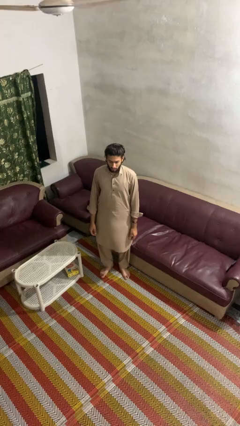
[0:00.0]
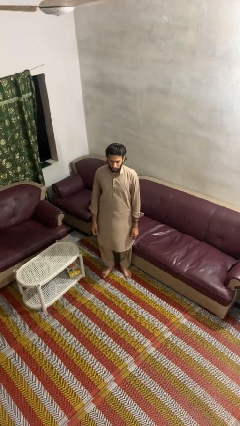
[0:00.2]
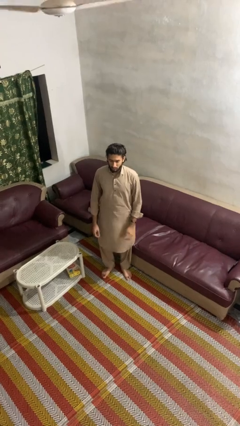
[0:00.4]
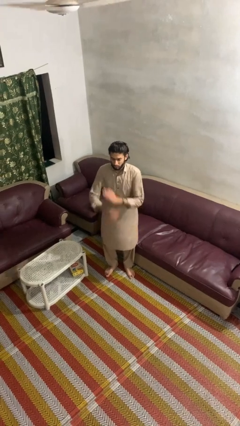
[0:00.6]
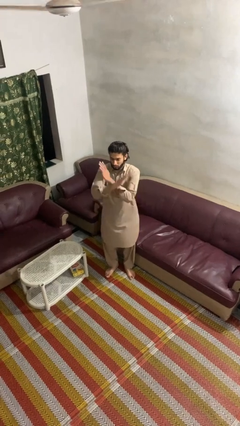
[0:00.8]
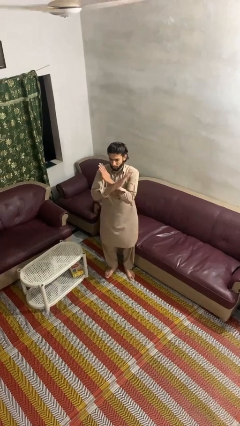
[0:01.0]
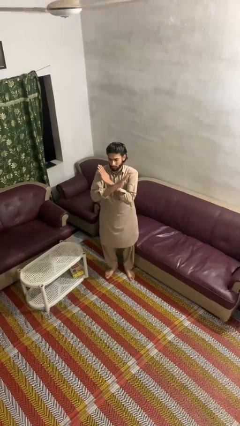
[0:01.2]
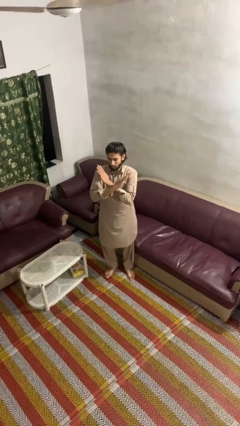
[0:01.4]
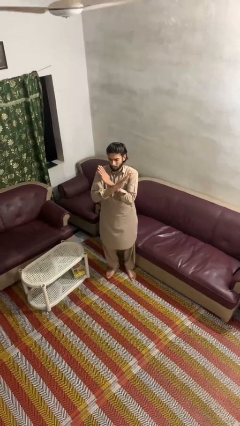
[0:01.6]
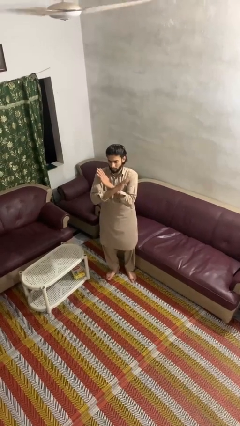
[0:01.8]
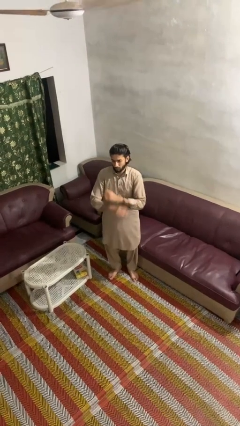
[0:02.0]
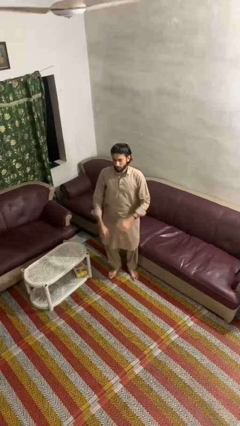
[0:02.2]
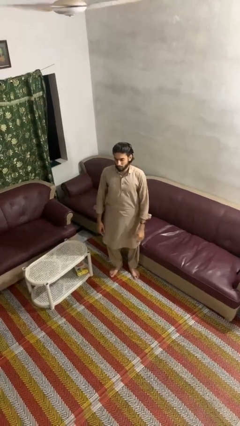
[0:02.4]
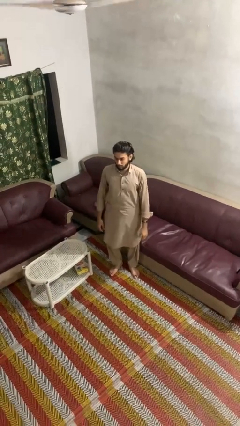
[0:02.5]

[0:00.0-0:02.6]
person gestures arms x

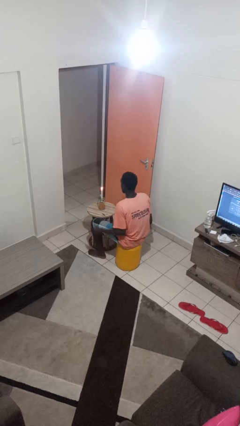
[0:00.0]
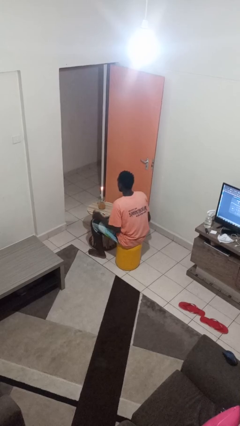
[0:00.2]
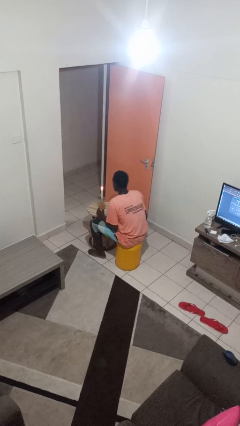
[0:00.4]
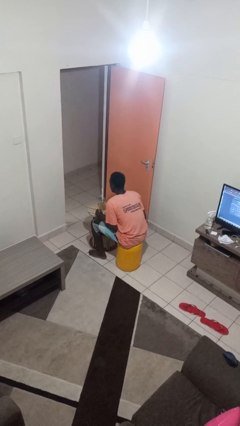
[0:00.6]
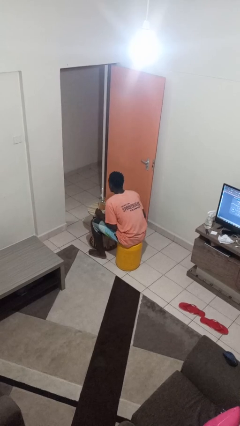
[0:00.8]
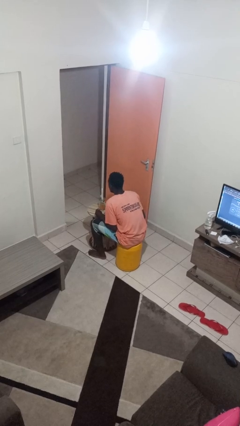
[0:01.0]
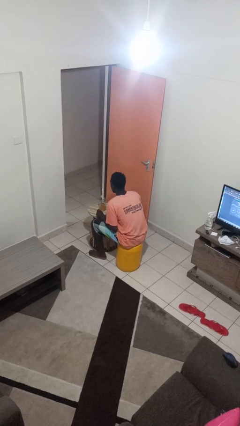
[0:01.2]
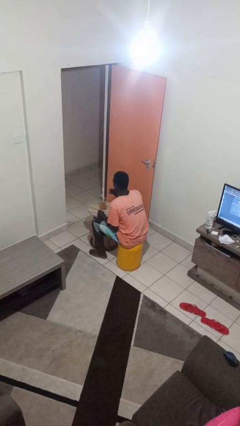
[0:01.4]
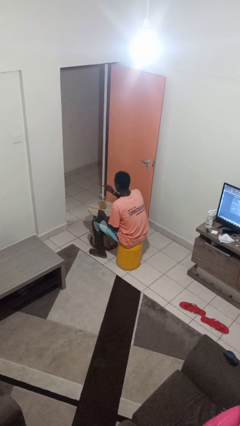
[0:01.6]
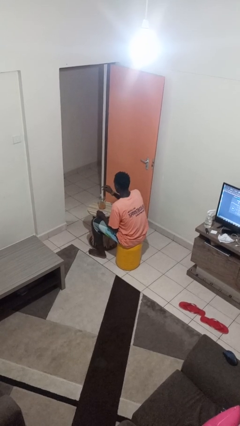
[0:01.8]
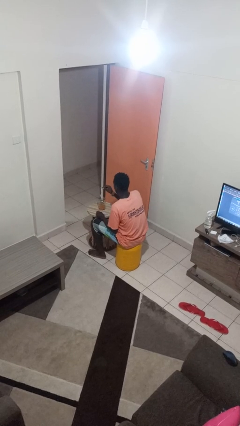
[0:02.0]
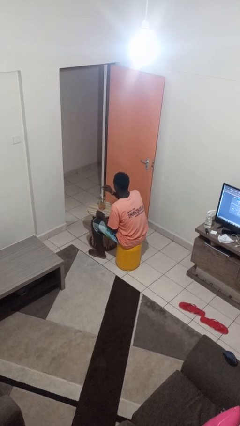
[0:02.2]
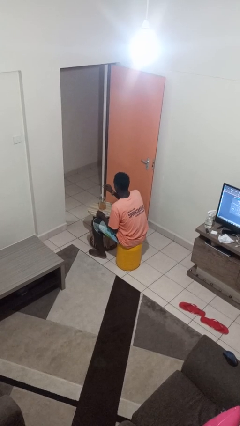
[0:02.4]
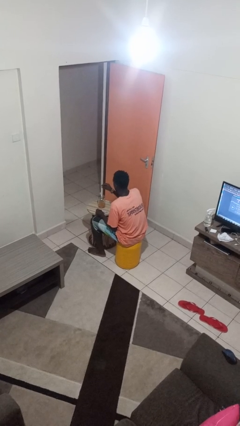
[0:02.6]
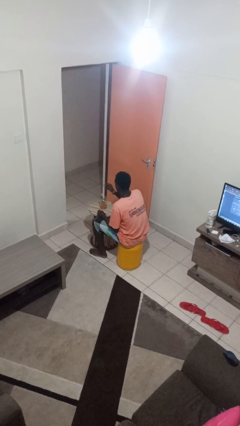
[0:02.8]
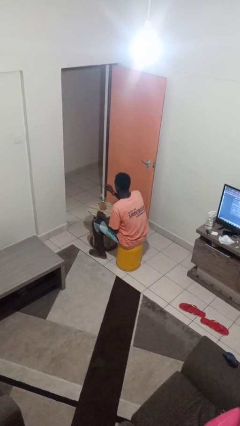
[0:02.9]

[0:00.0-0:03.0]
person extinguishes candle

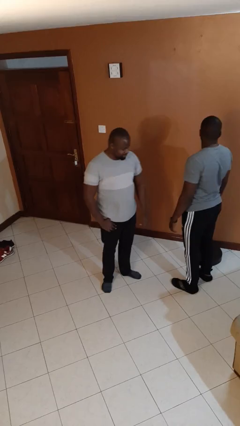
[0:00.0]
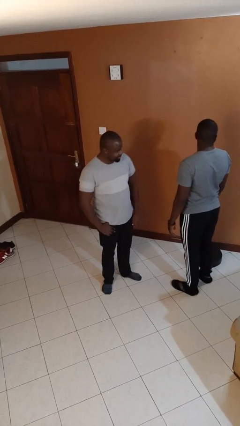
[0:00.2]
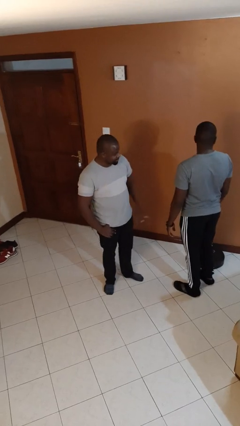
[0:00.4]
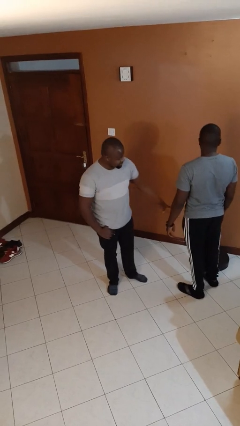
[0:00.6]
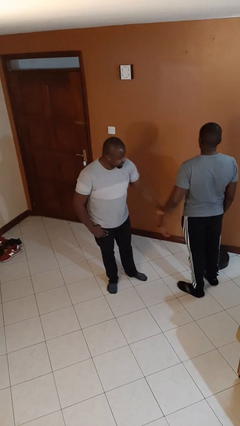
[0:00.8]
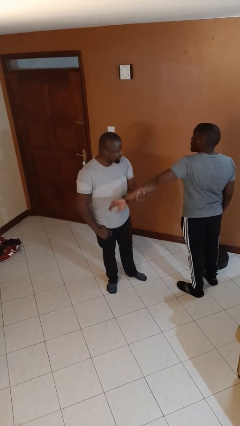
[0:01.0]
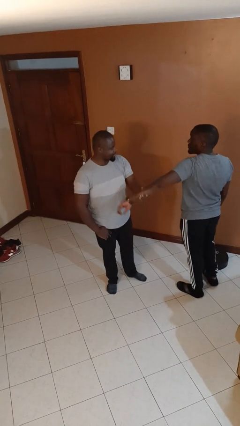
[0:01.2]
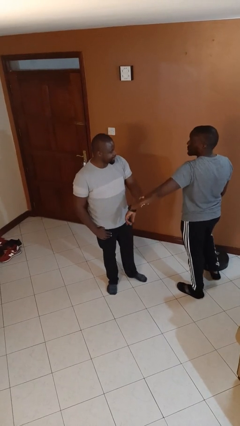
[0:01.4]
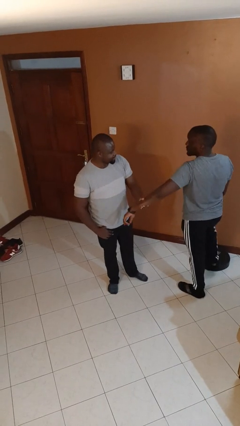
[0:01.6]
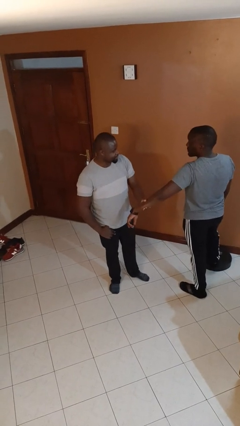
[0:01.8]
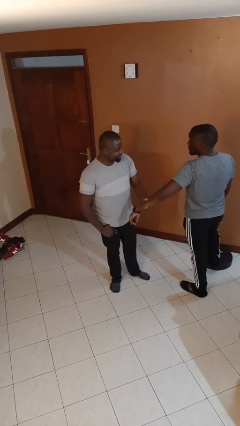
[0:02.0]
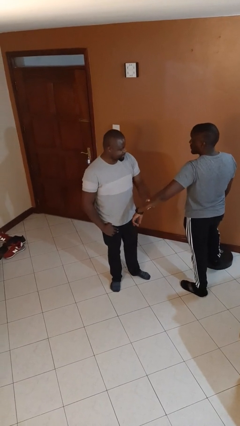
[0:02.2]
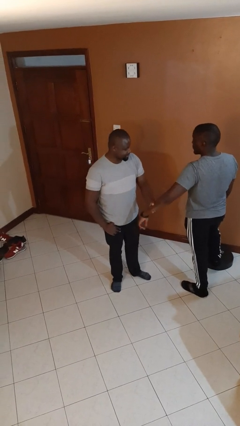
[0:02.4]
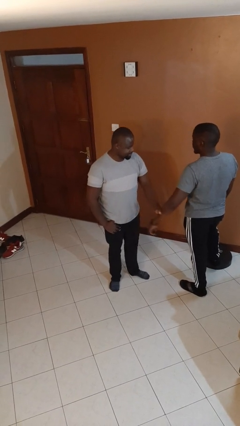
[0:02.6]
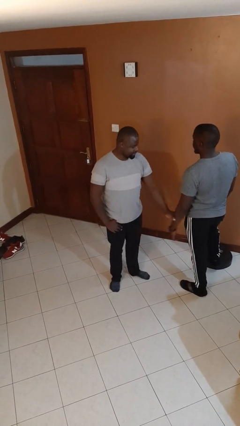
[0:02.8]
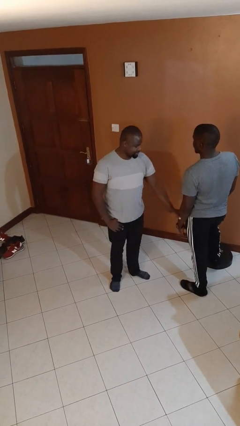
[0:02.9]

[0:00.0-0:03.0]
person grabs person by forearm

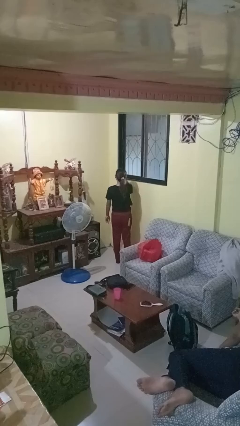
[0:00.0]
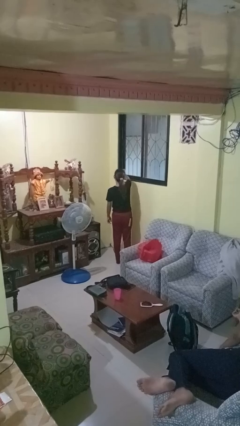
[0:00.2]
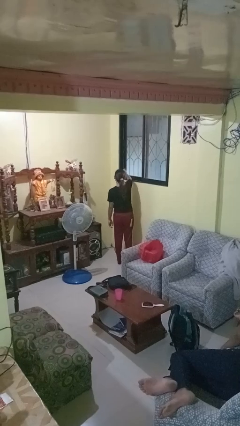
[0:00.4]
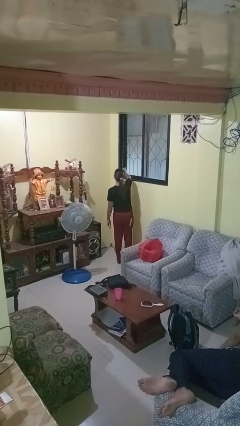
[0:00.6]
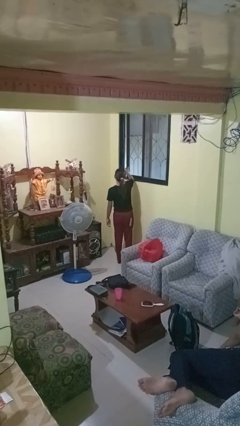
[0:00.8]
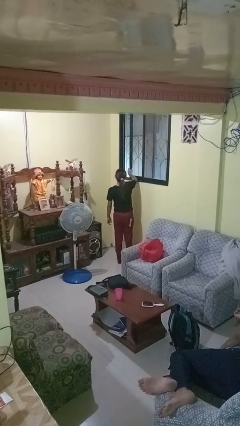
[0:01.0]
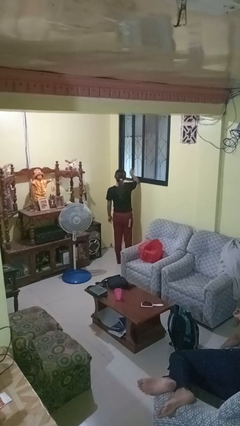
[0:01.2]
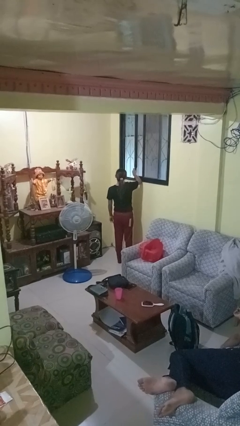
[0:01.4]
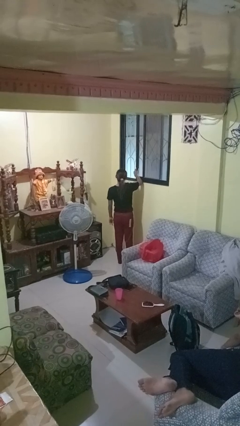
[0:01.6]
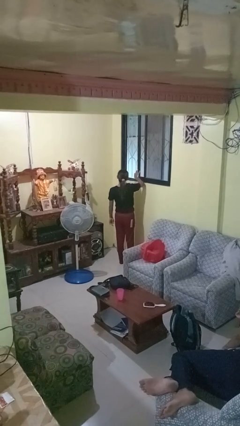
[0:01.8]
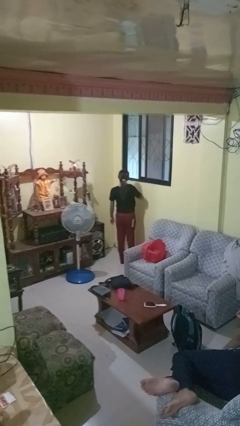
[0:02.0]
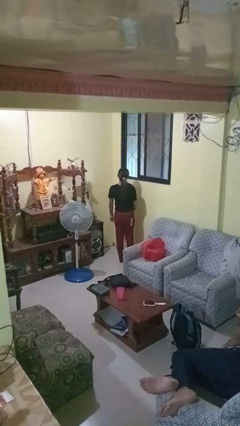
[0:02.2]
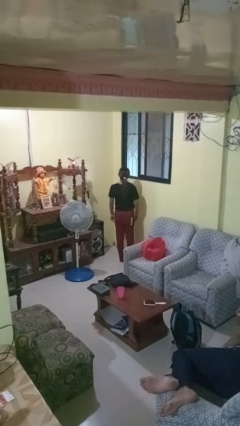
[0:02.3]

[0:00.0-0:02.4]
person opens home window

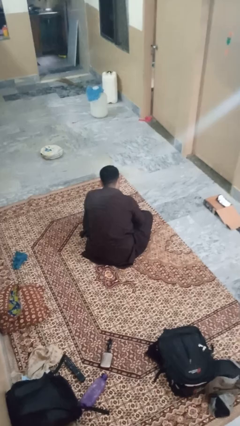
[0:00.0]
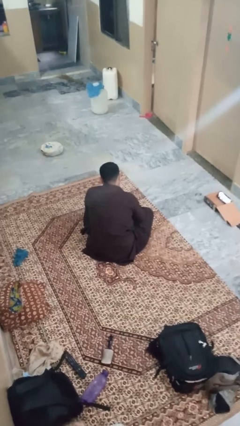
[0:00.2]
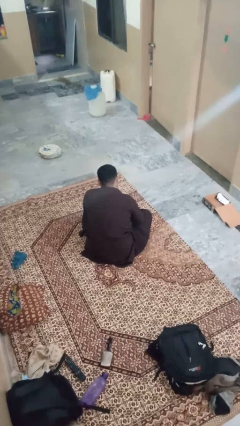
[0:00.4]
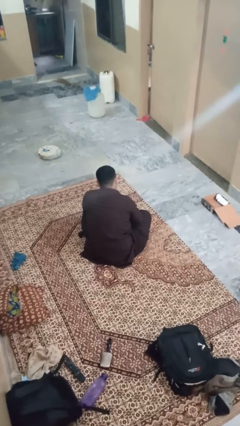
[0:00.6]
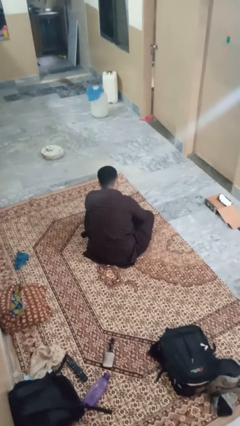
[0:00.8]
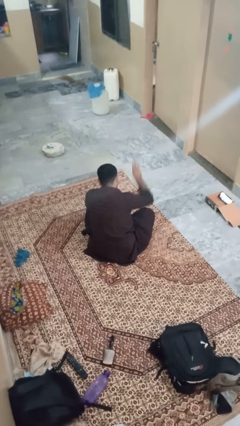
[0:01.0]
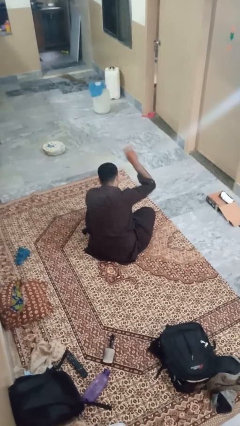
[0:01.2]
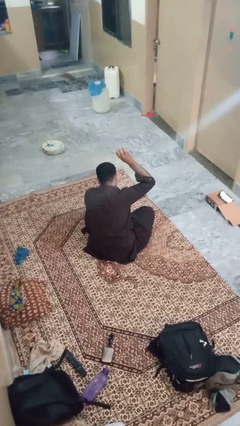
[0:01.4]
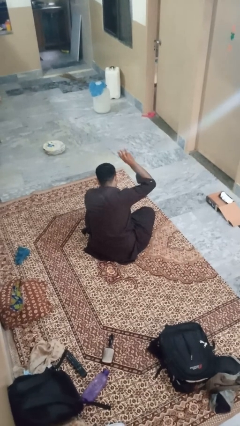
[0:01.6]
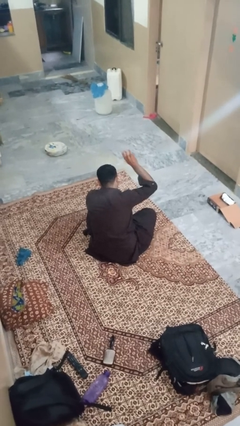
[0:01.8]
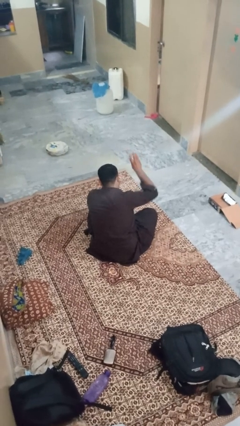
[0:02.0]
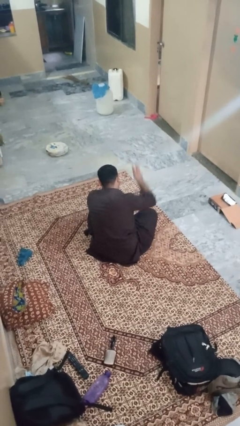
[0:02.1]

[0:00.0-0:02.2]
person gestures number three

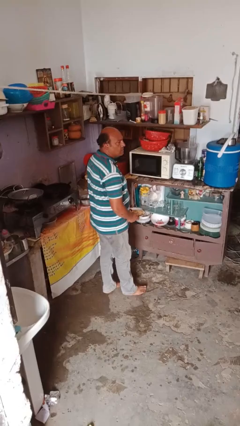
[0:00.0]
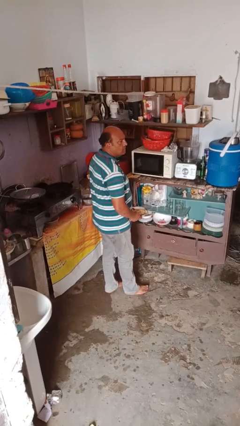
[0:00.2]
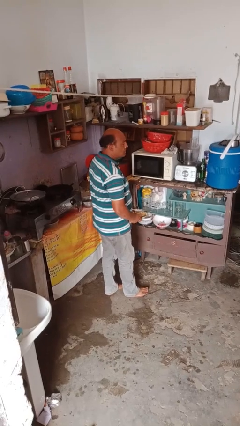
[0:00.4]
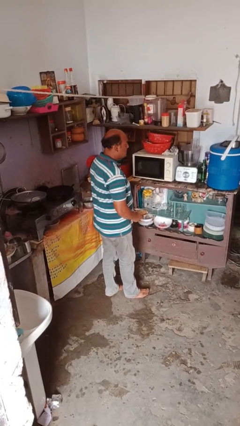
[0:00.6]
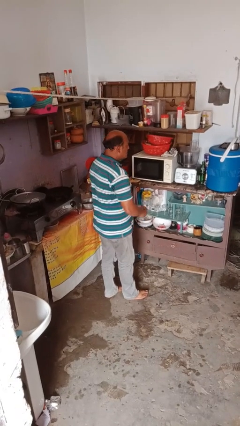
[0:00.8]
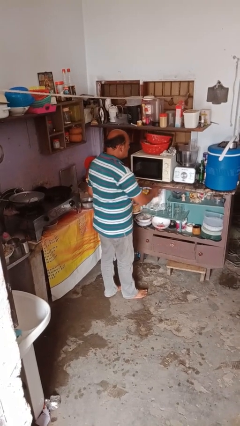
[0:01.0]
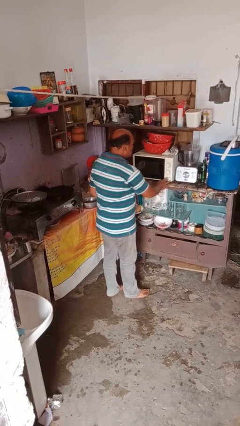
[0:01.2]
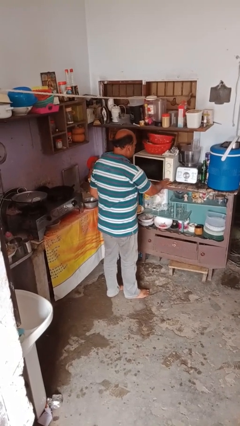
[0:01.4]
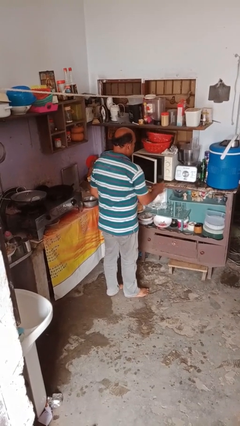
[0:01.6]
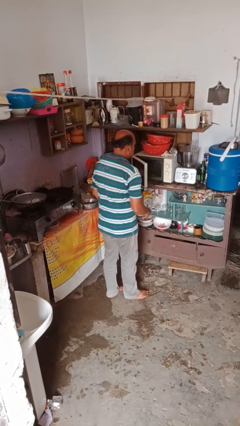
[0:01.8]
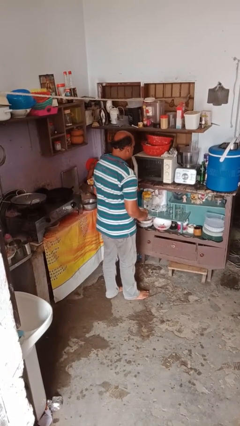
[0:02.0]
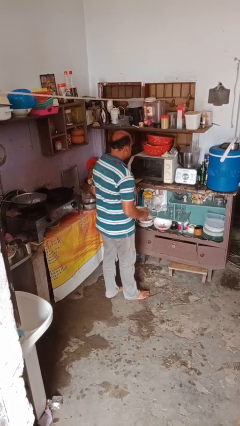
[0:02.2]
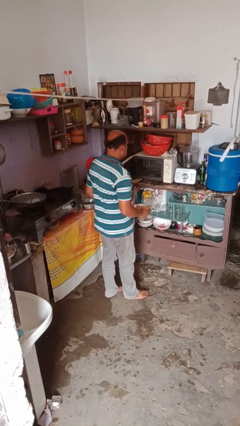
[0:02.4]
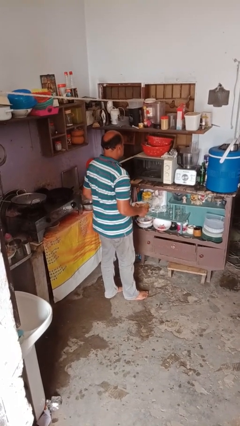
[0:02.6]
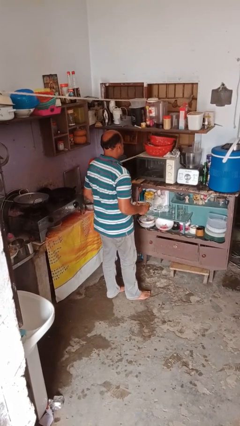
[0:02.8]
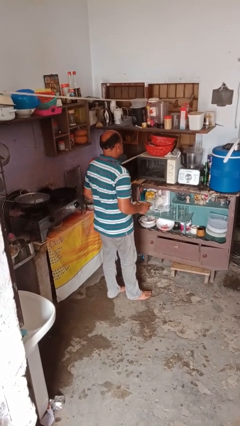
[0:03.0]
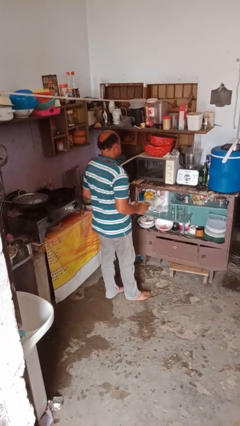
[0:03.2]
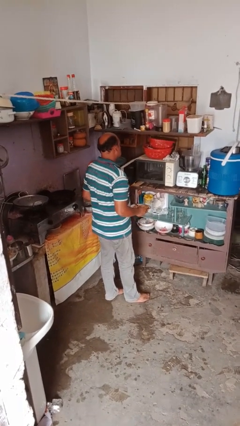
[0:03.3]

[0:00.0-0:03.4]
person opens microwave

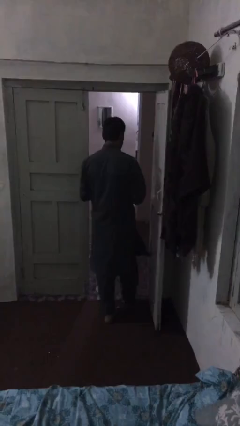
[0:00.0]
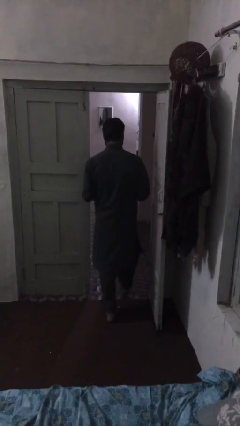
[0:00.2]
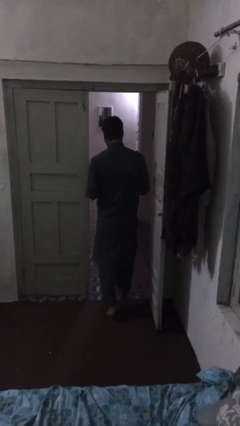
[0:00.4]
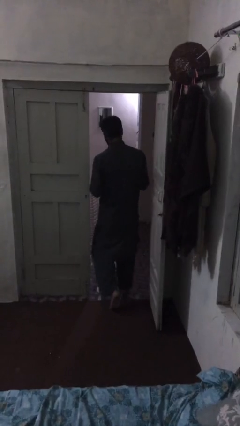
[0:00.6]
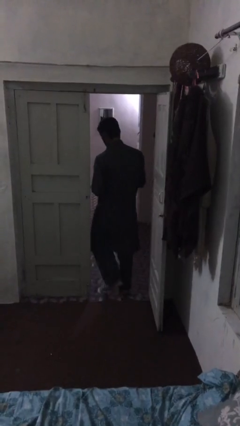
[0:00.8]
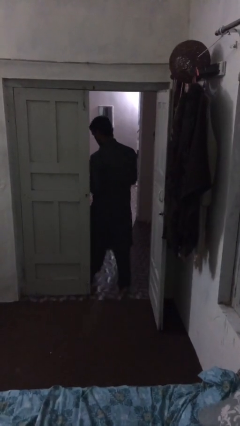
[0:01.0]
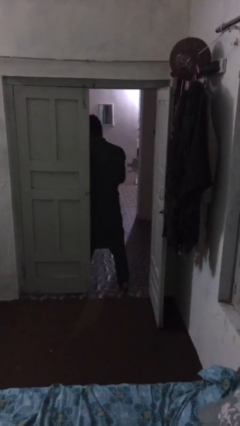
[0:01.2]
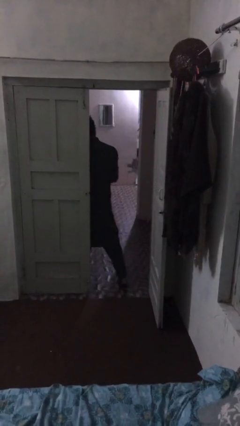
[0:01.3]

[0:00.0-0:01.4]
person exits scene through structure
